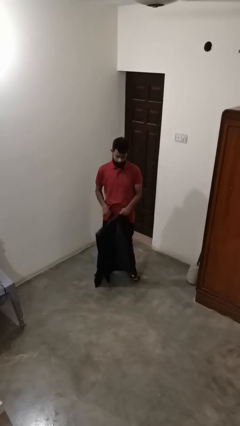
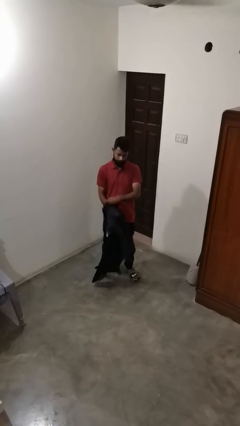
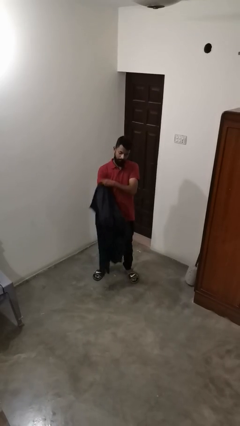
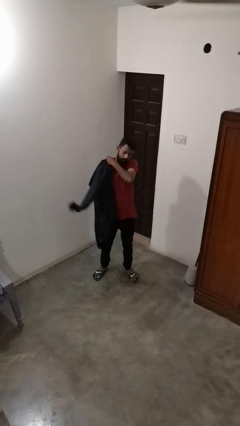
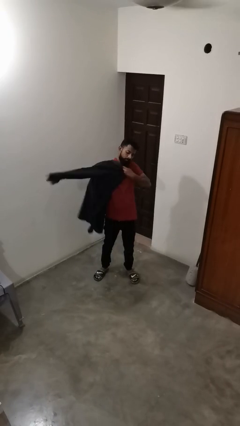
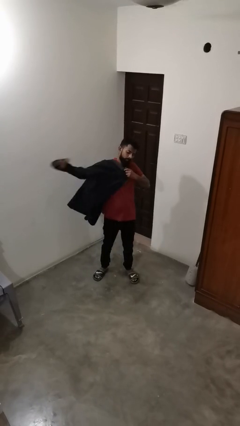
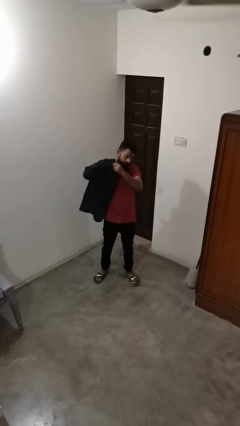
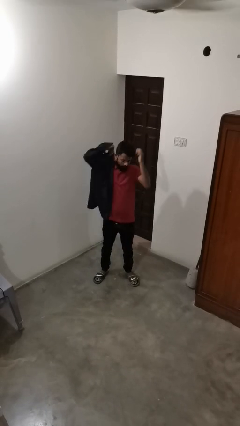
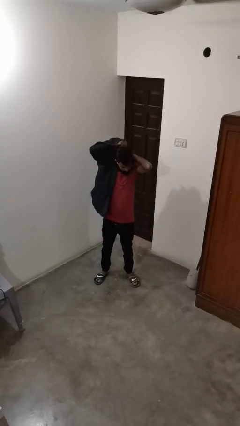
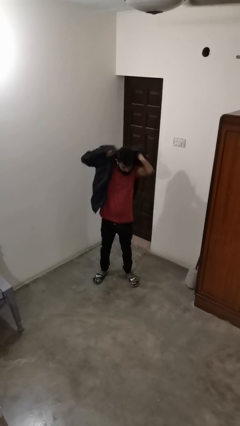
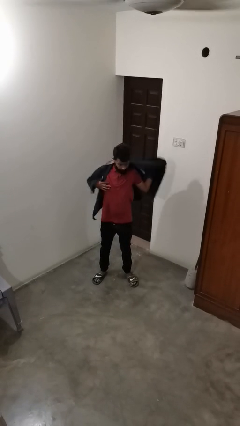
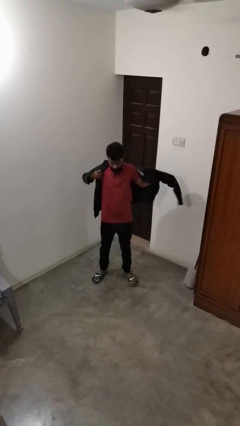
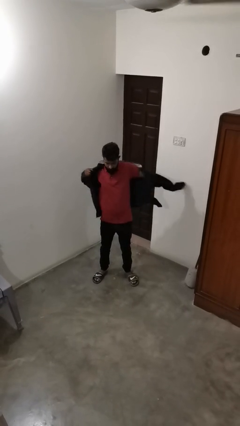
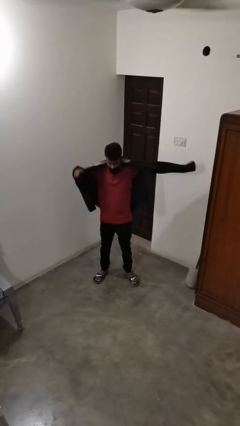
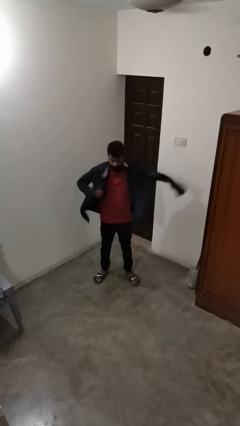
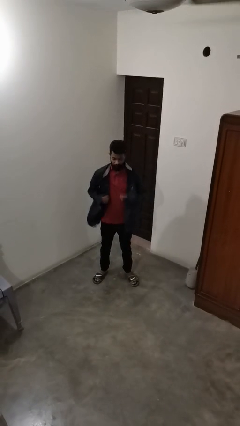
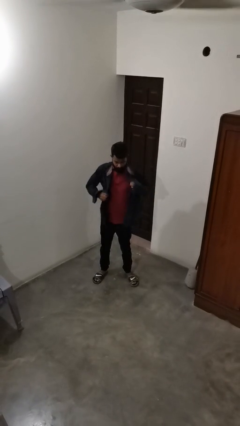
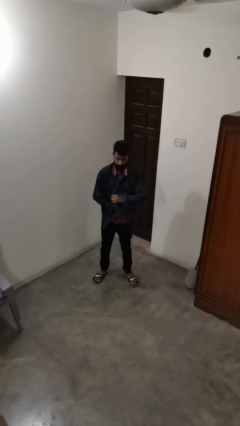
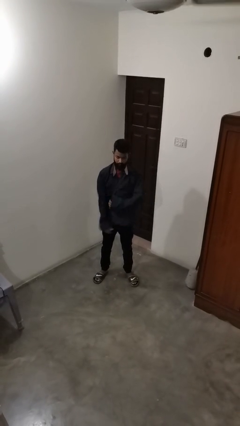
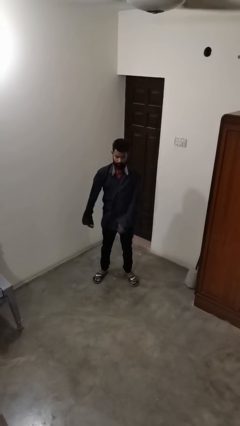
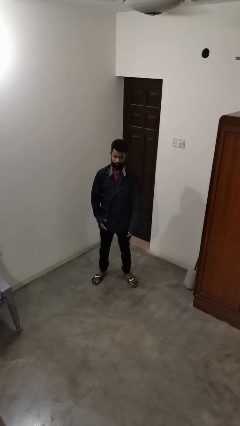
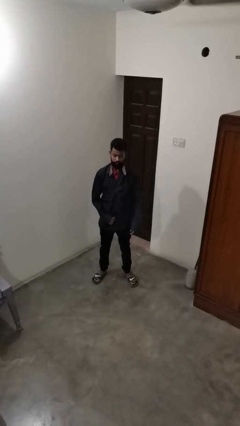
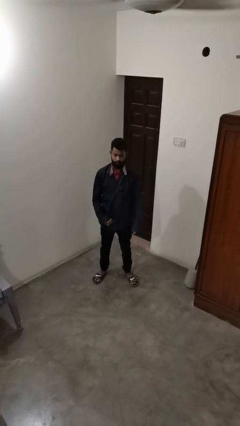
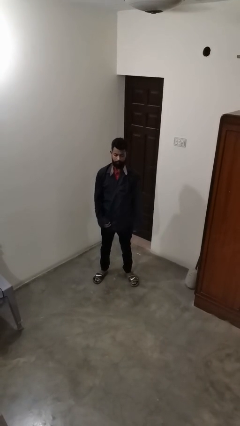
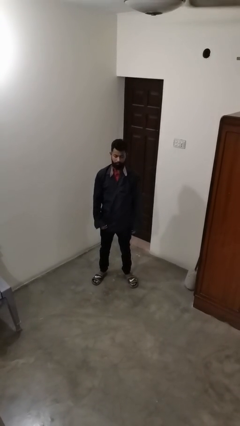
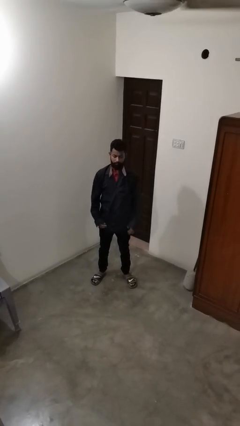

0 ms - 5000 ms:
person puts on shirt

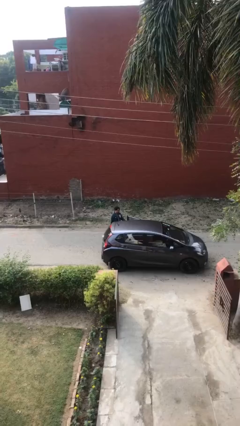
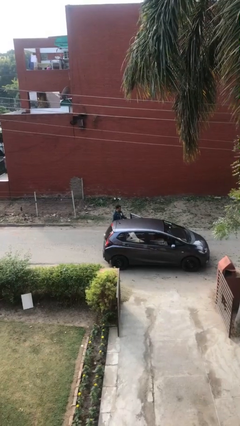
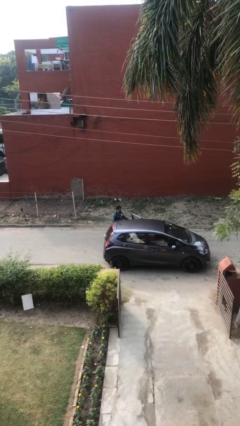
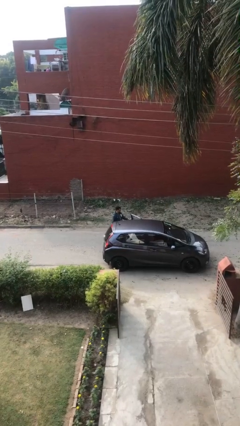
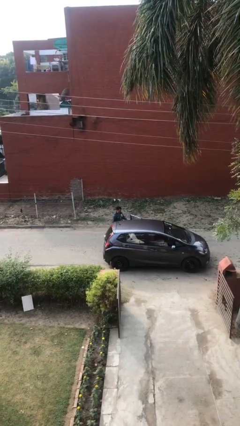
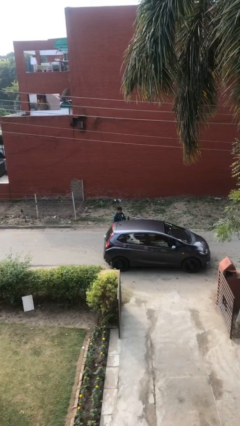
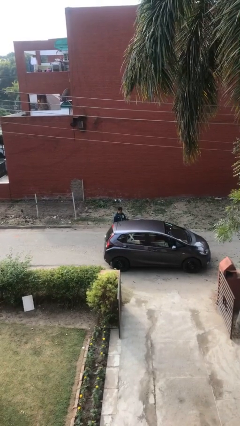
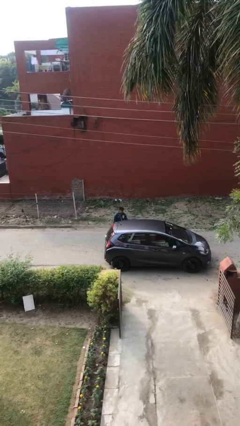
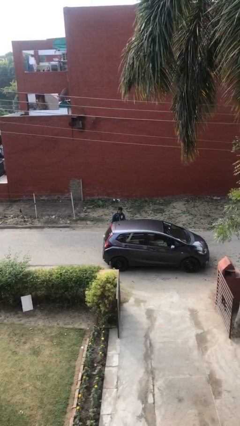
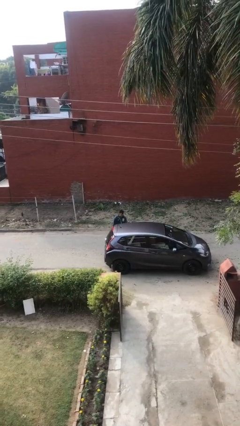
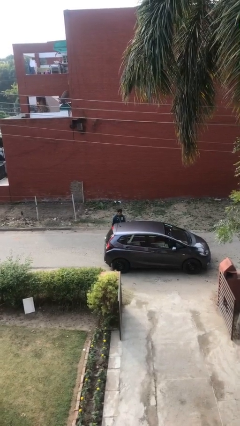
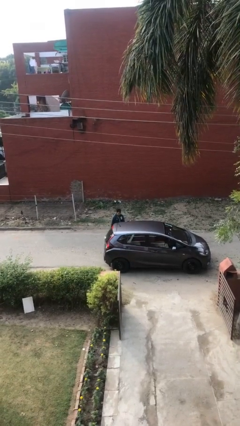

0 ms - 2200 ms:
person closes car door

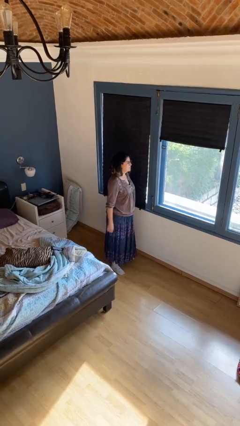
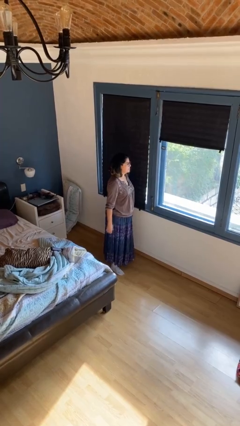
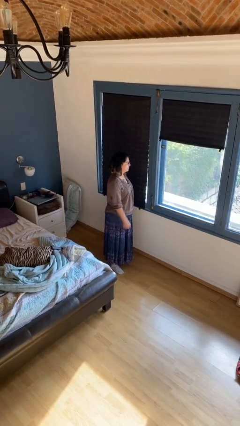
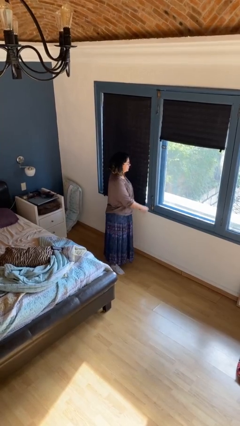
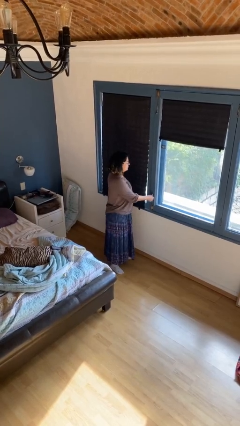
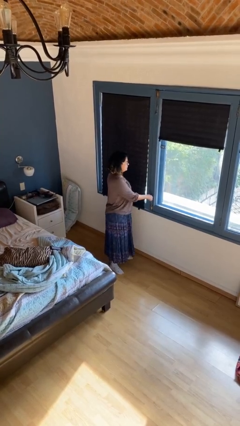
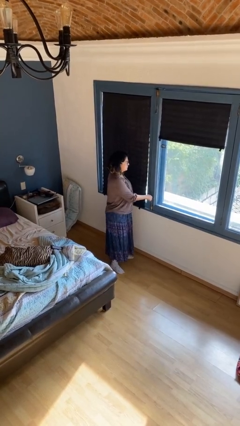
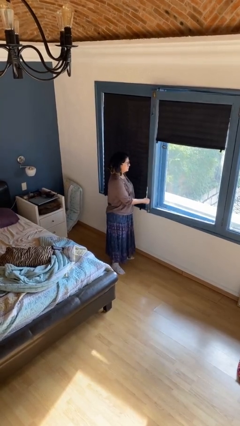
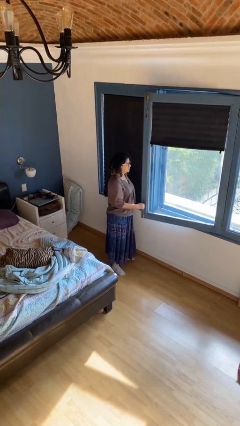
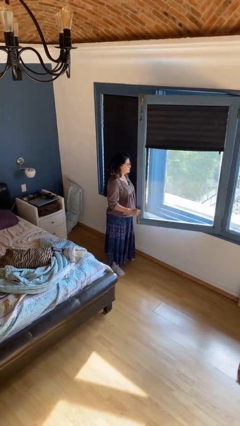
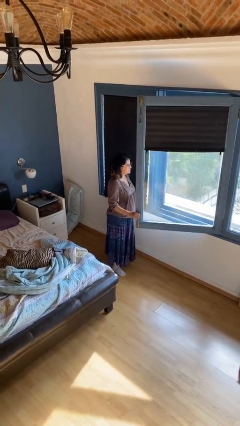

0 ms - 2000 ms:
person opens home window

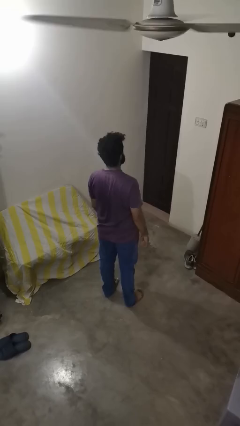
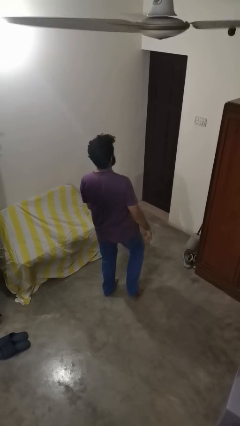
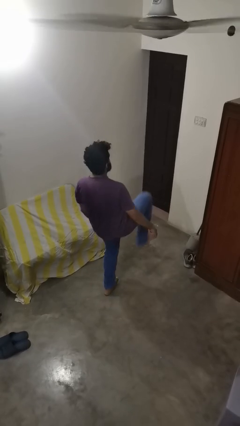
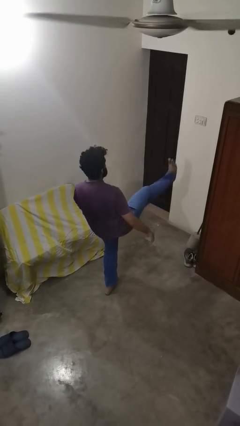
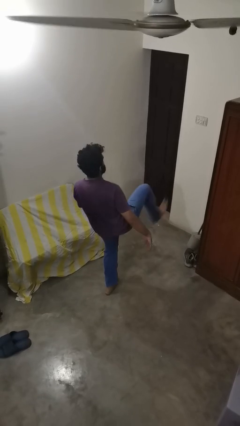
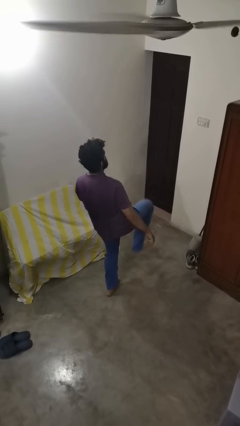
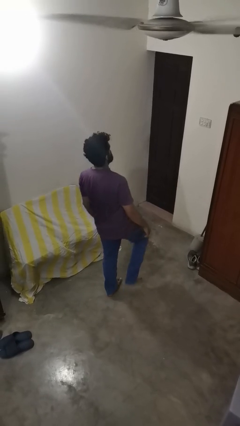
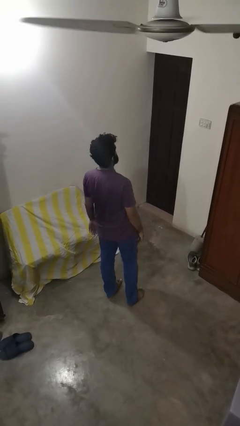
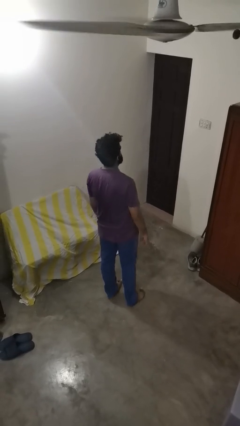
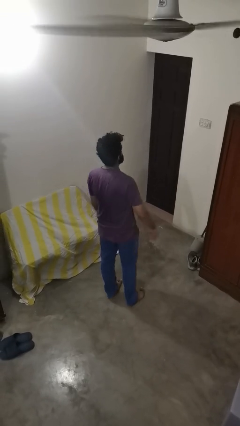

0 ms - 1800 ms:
person karate kicks

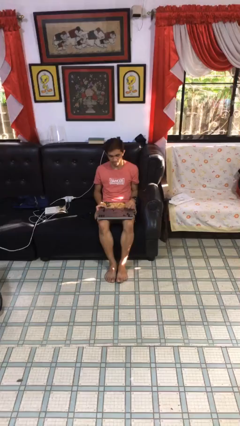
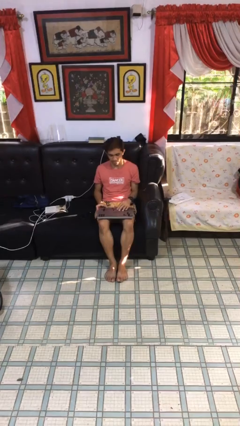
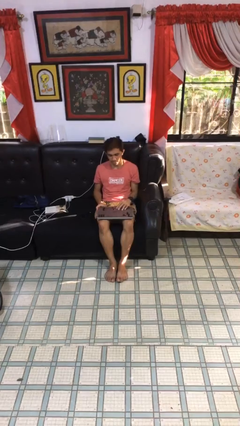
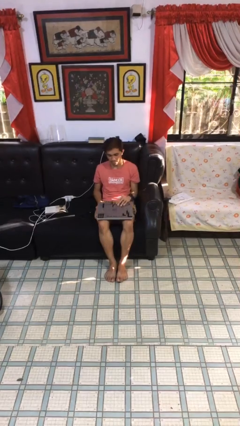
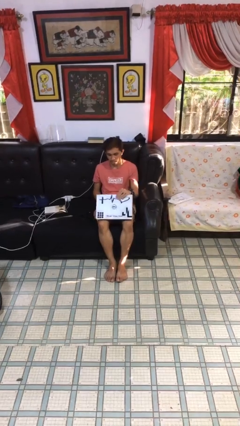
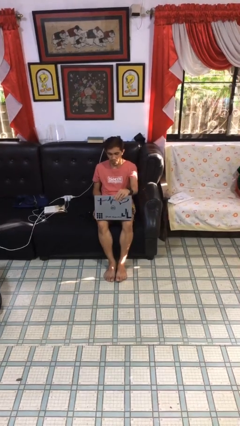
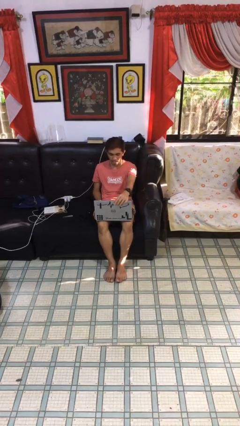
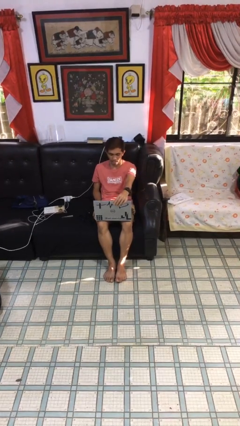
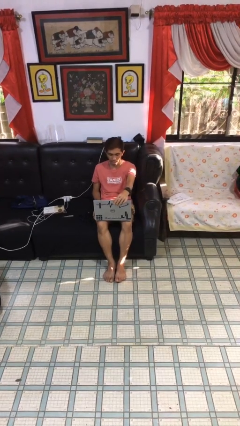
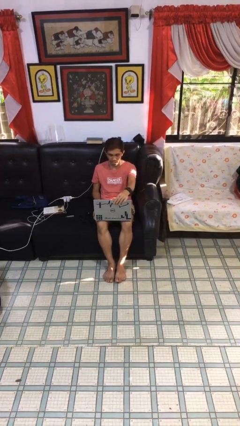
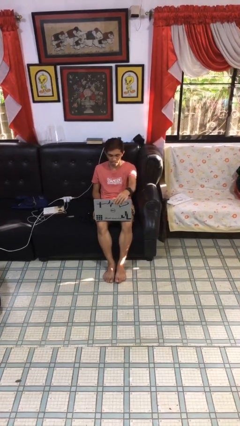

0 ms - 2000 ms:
person interacts with laptop

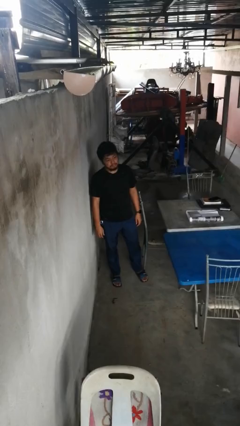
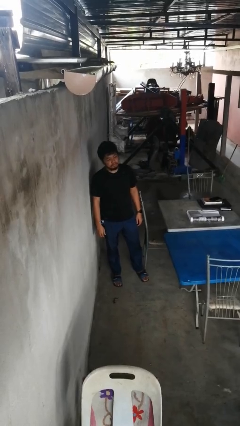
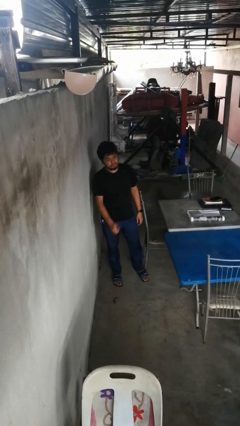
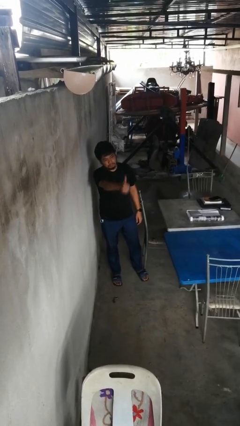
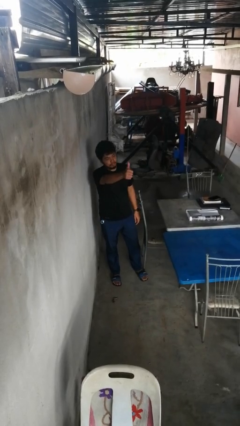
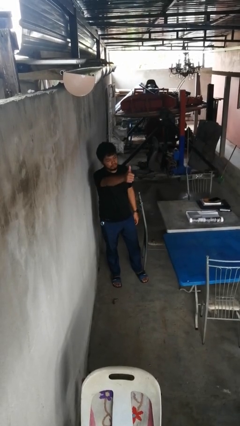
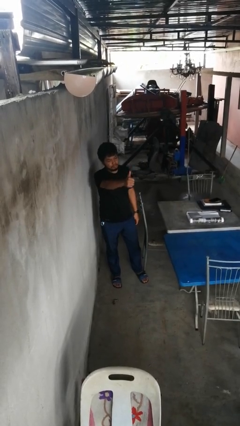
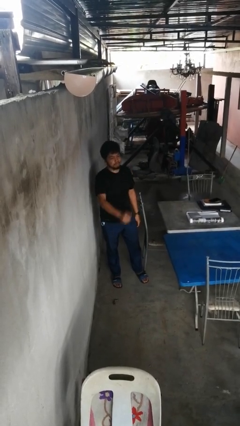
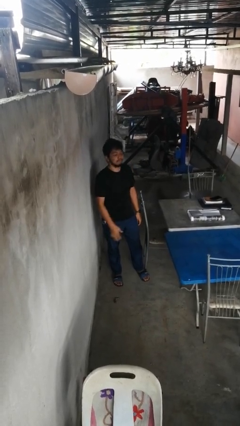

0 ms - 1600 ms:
person gestures thumbs up

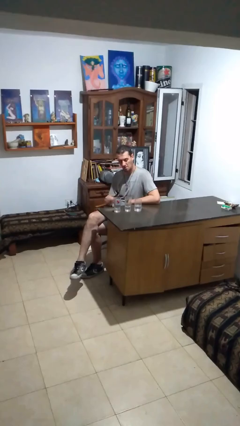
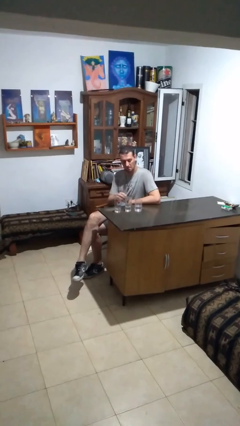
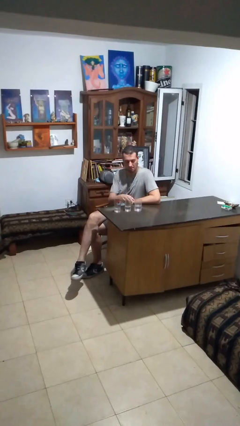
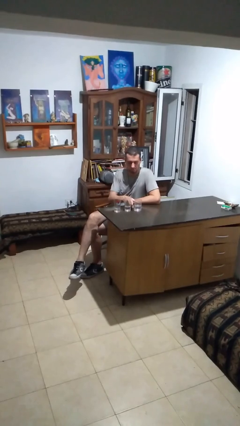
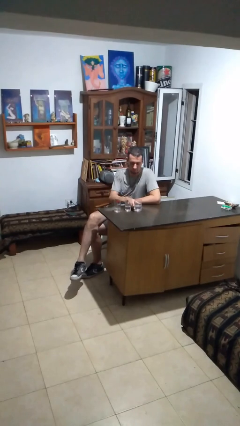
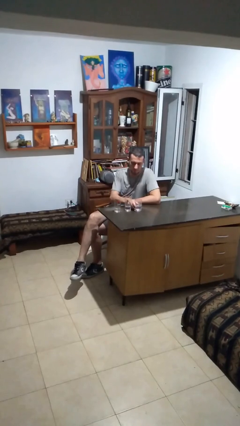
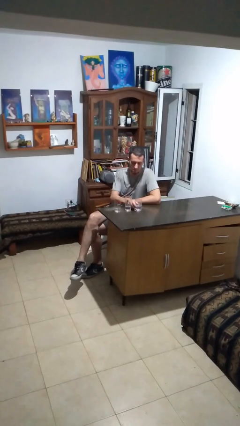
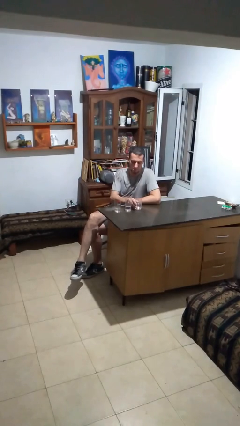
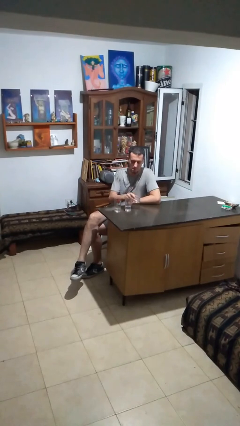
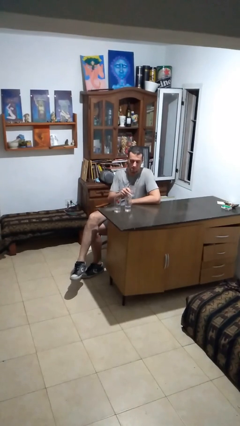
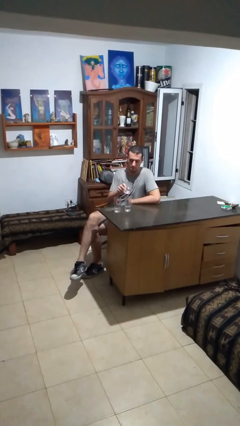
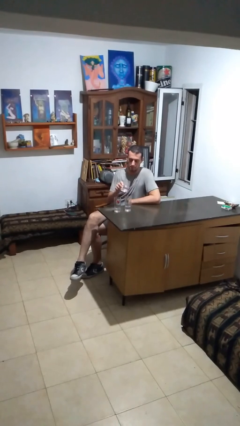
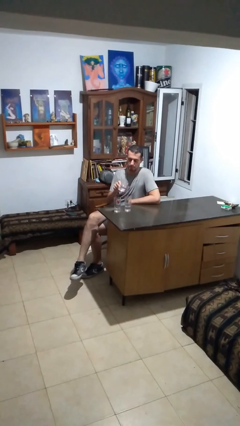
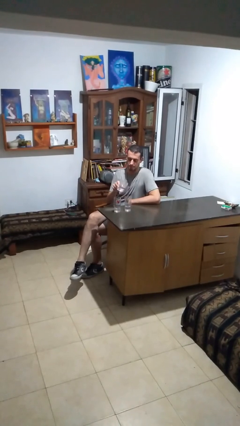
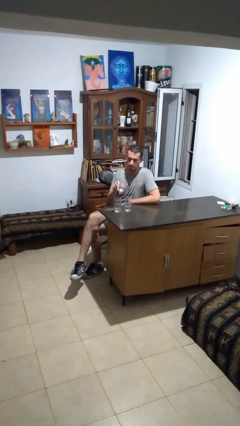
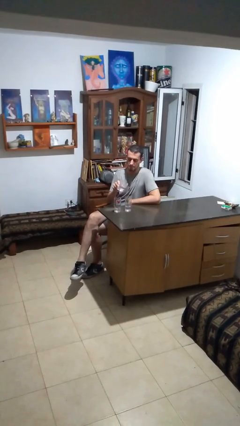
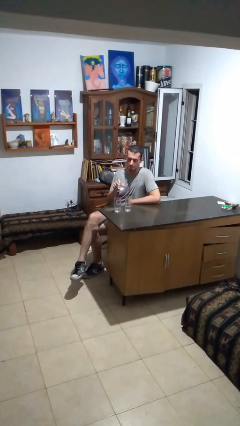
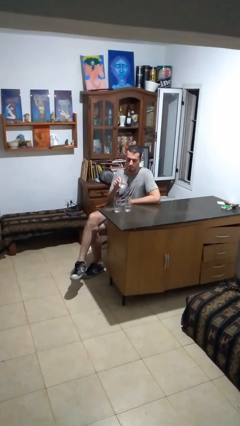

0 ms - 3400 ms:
person picks up object from table
